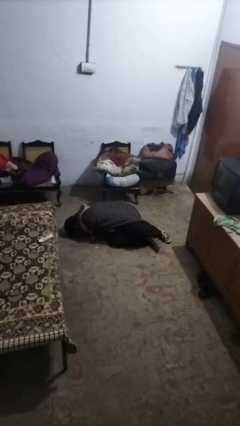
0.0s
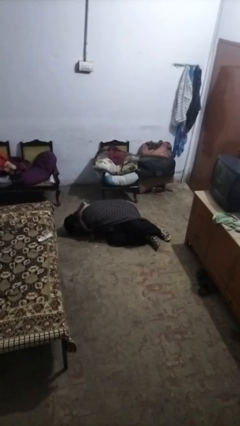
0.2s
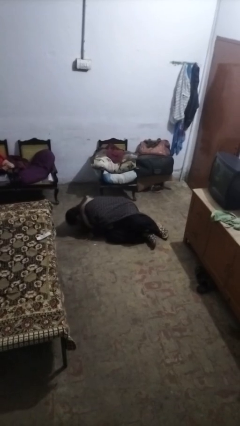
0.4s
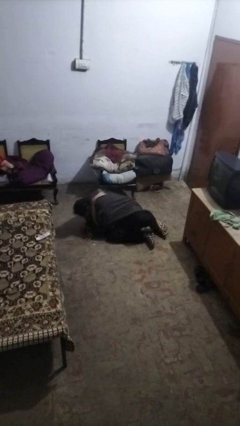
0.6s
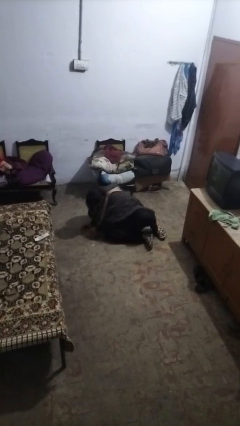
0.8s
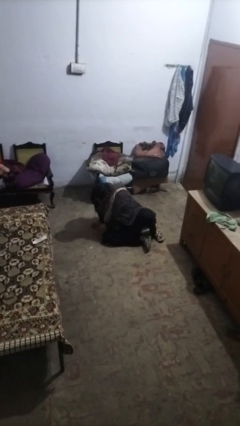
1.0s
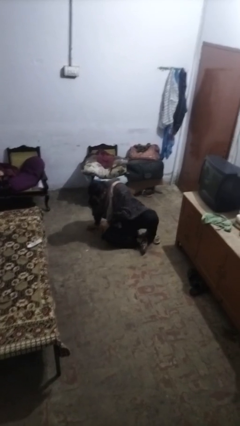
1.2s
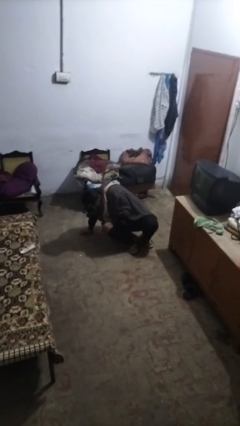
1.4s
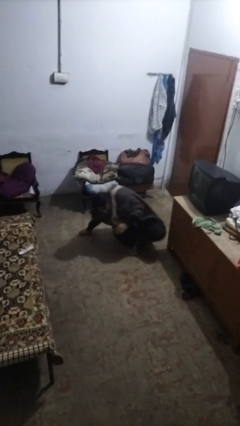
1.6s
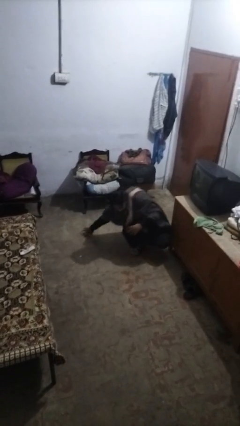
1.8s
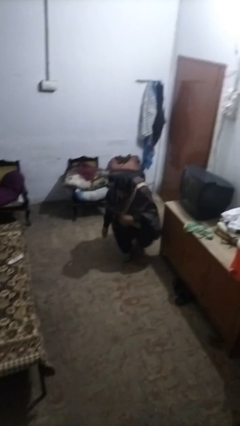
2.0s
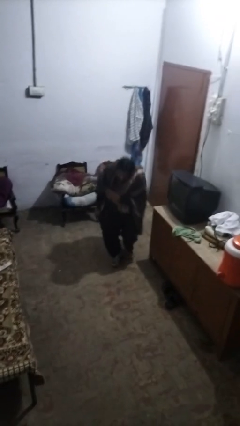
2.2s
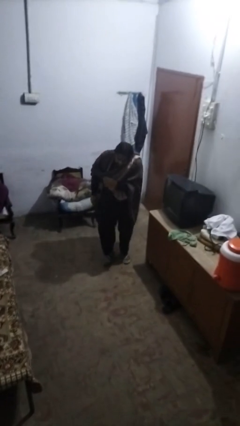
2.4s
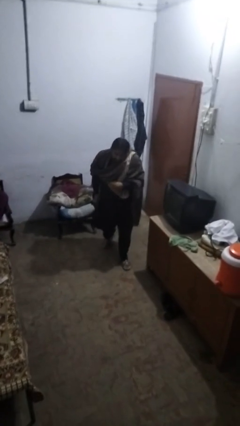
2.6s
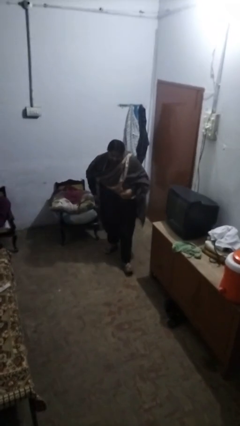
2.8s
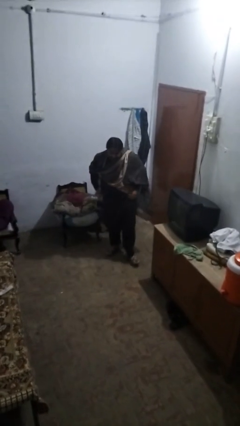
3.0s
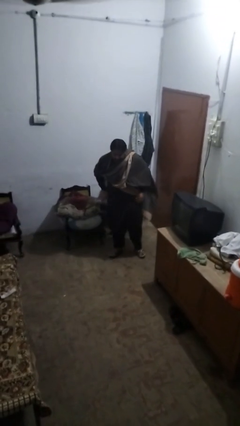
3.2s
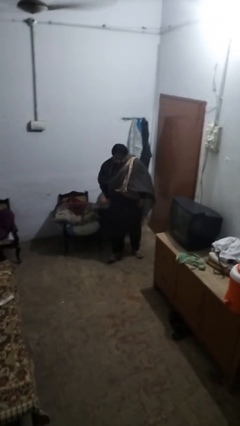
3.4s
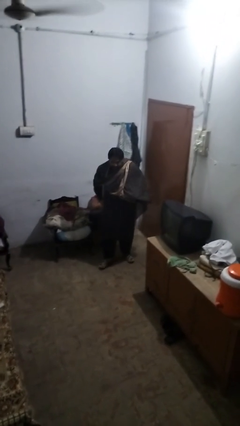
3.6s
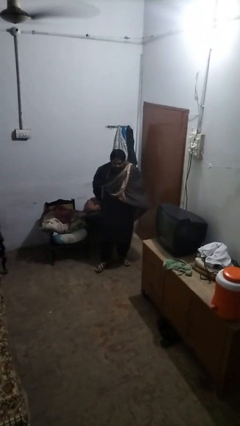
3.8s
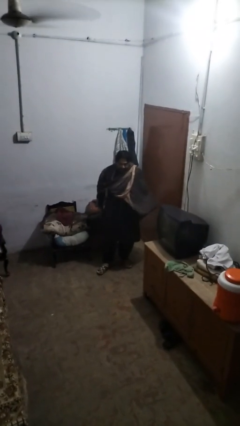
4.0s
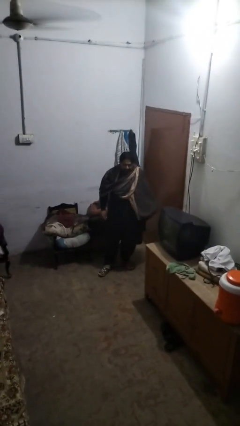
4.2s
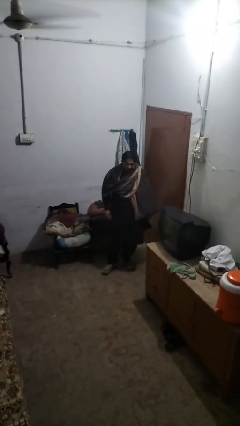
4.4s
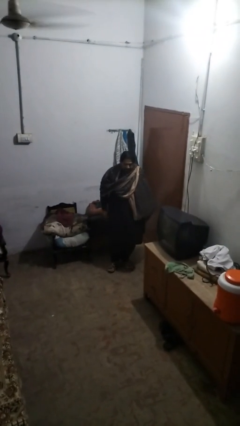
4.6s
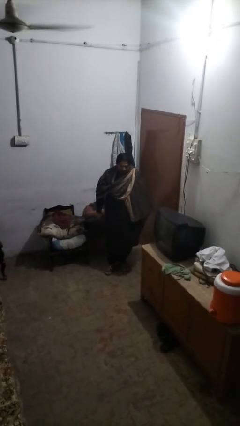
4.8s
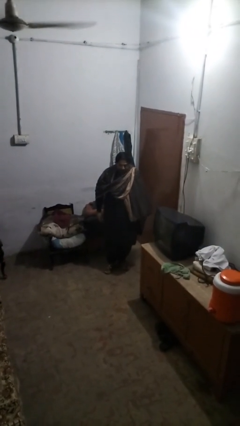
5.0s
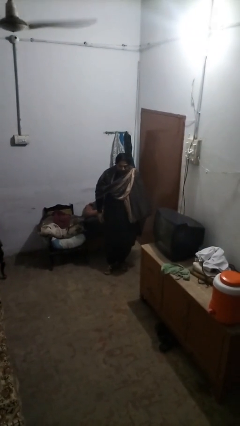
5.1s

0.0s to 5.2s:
person stands up from floor

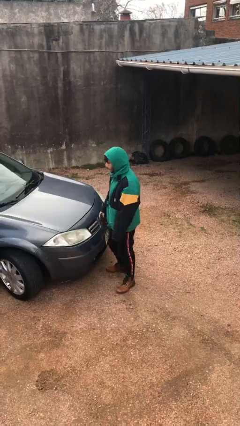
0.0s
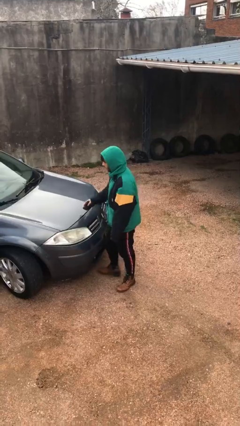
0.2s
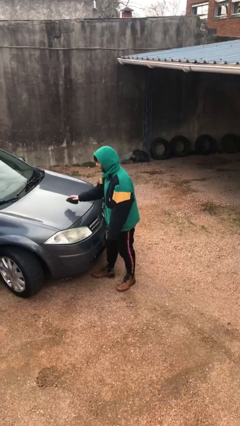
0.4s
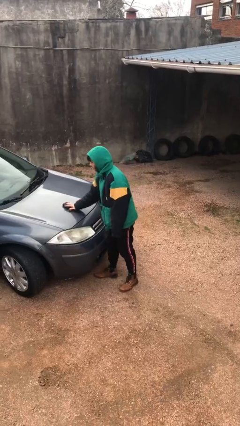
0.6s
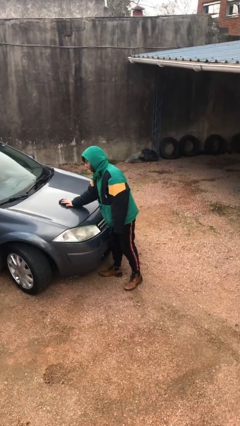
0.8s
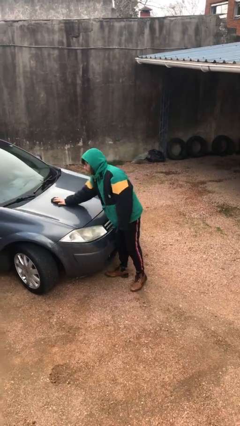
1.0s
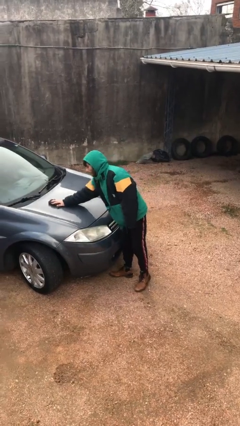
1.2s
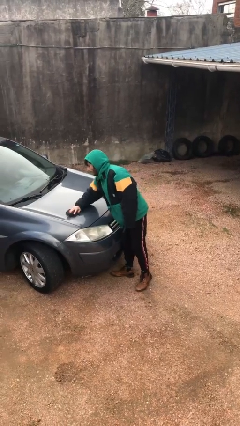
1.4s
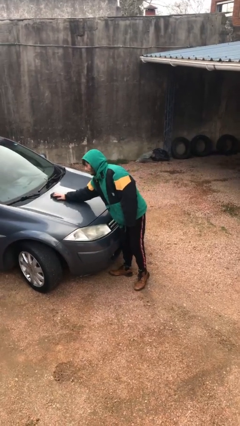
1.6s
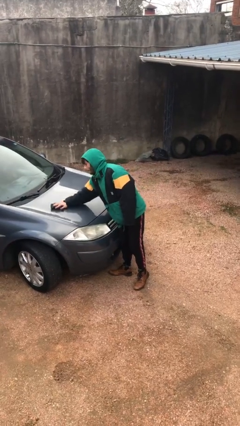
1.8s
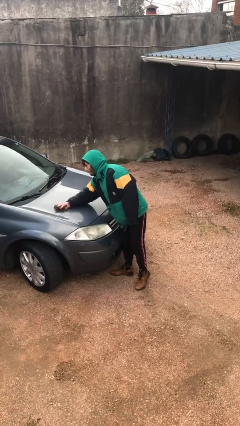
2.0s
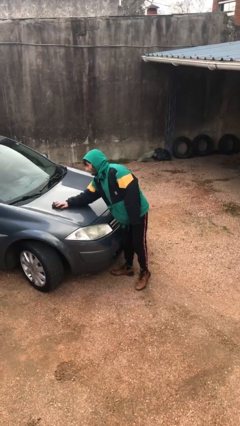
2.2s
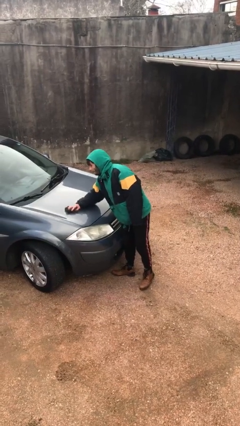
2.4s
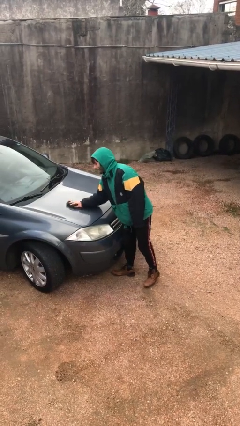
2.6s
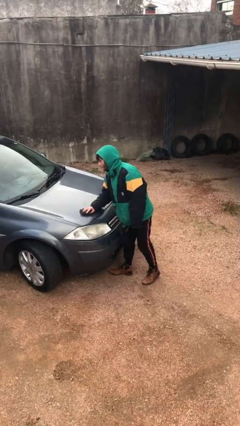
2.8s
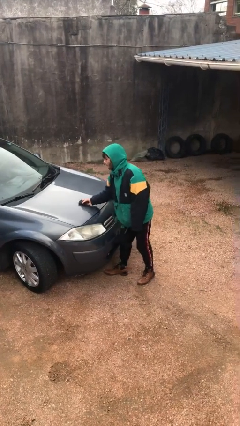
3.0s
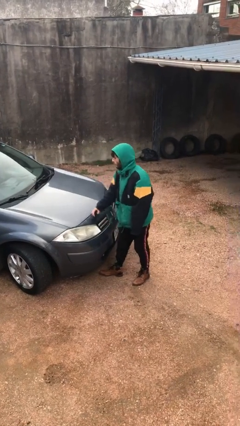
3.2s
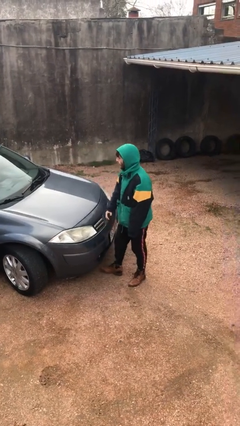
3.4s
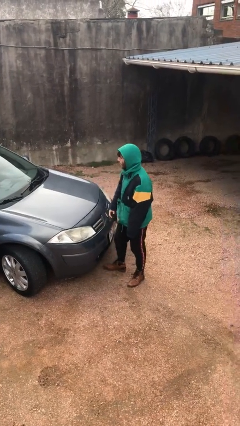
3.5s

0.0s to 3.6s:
person polishes car with rag

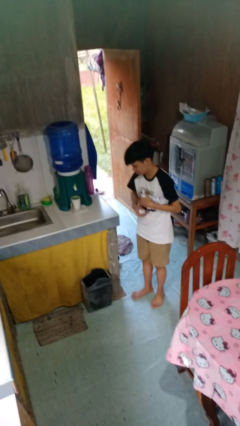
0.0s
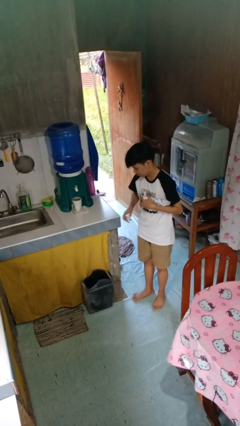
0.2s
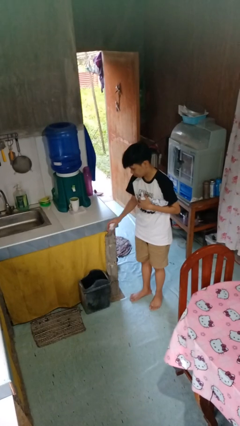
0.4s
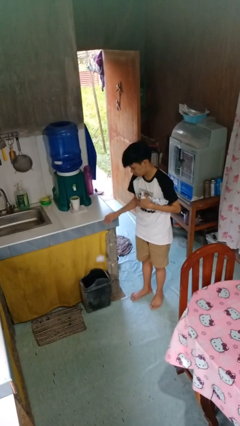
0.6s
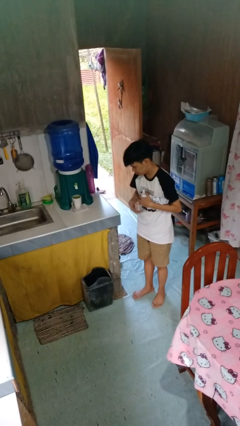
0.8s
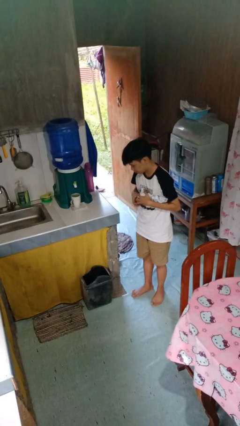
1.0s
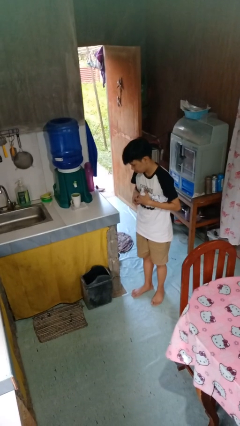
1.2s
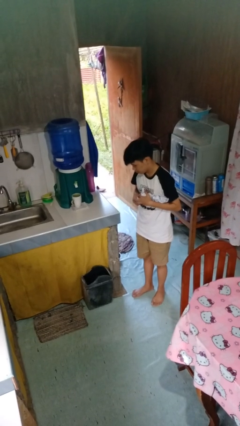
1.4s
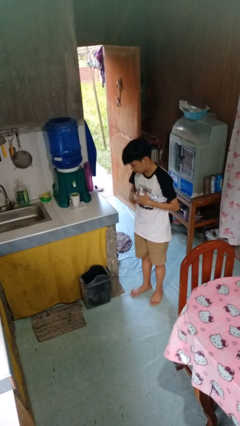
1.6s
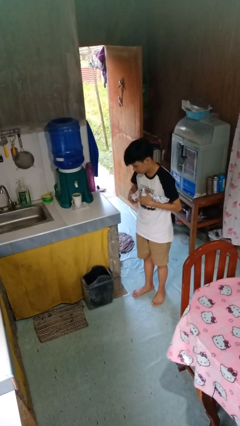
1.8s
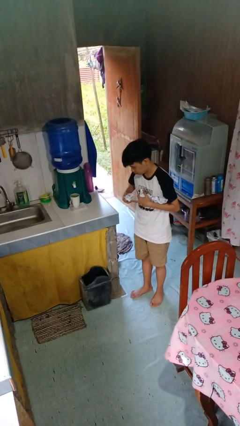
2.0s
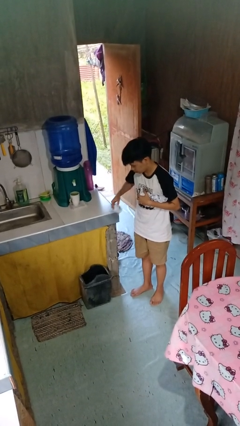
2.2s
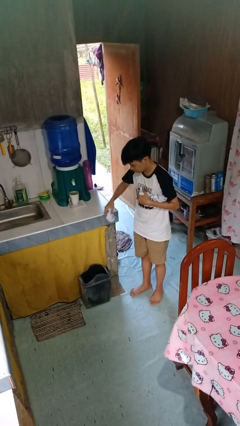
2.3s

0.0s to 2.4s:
person discards trash

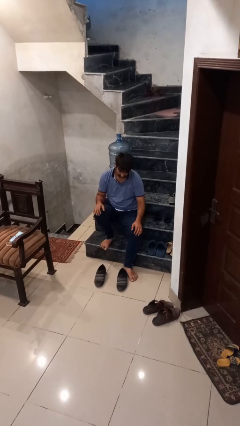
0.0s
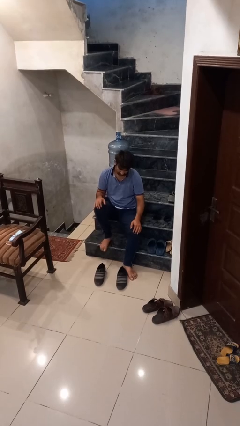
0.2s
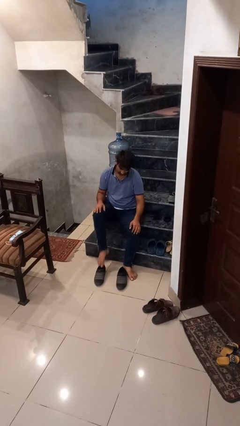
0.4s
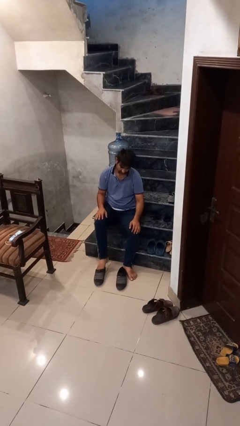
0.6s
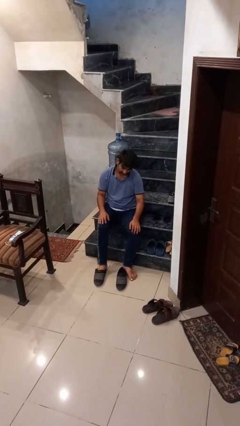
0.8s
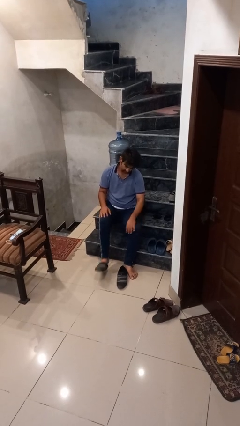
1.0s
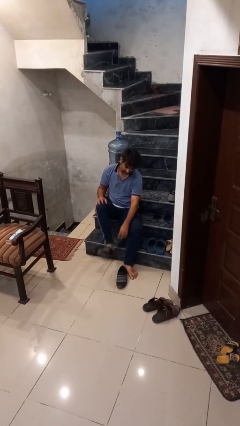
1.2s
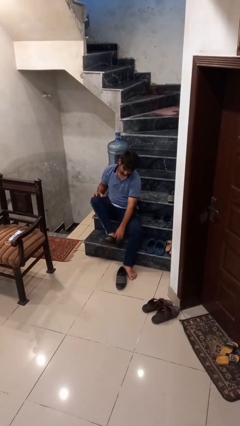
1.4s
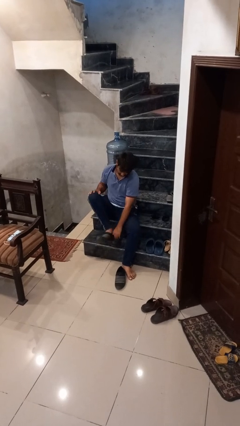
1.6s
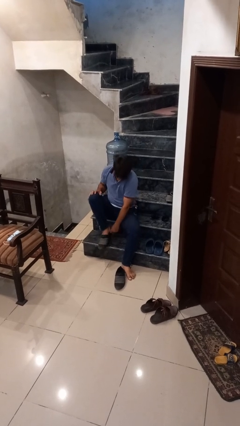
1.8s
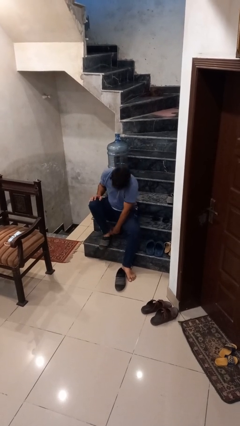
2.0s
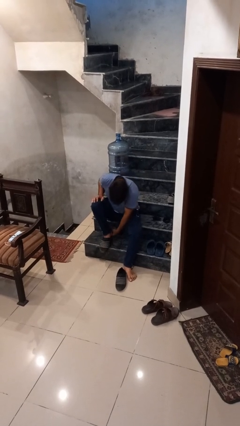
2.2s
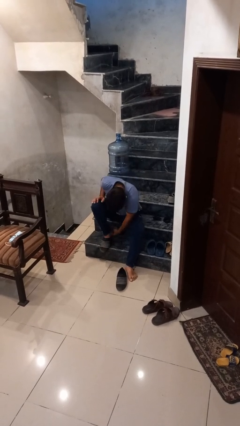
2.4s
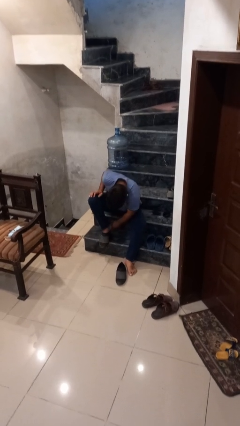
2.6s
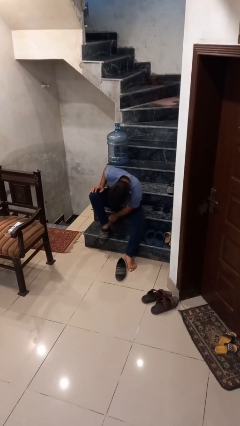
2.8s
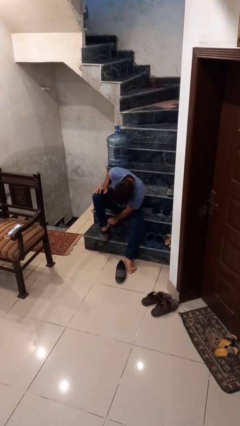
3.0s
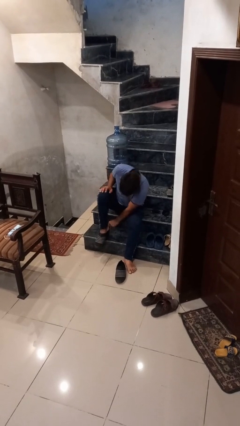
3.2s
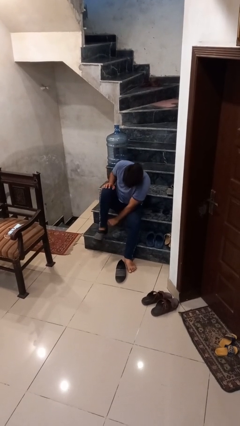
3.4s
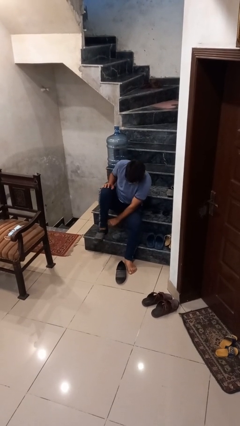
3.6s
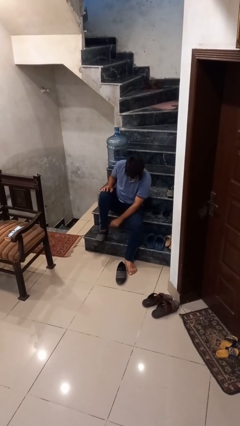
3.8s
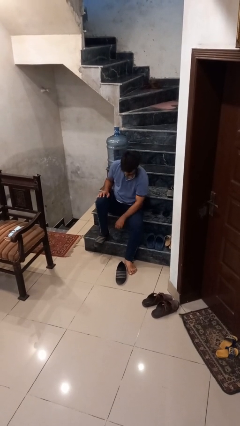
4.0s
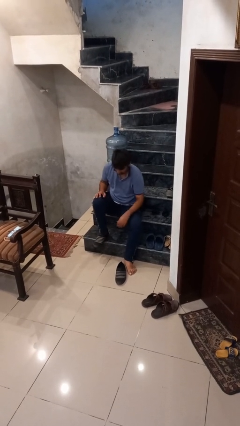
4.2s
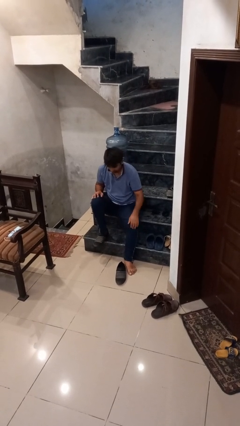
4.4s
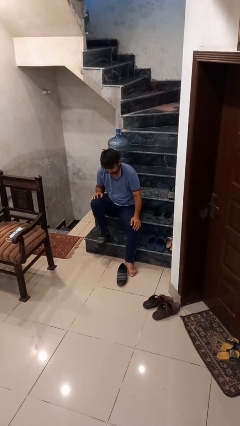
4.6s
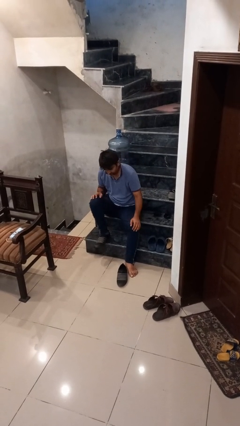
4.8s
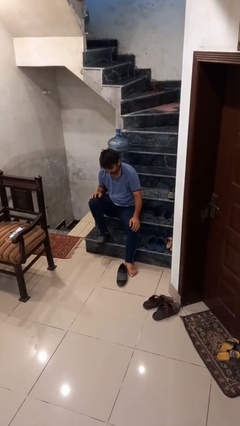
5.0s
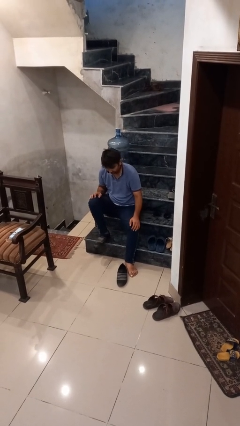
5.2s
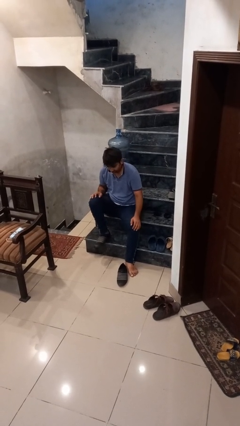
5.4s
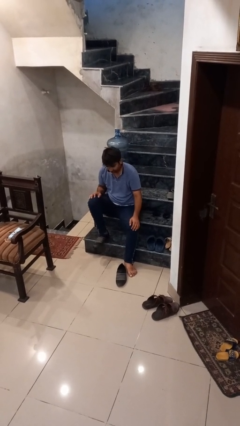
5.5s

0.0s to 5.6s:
person puts on shoes

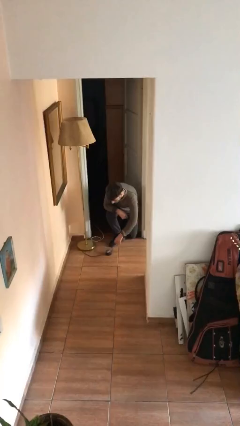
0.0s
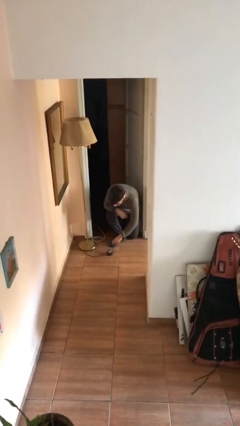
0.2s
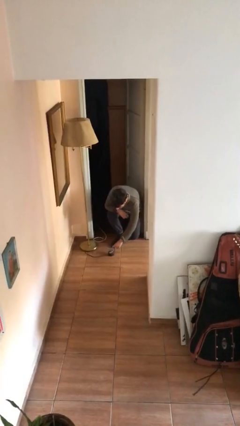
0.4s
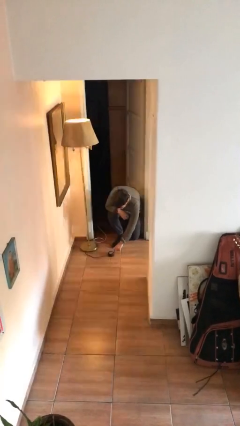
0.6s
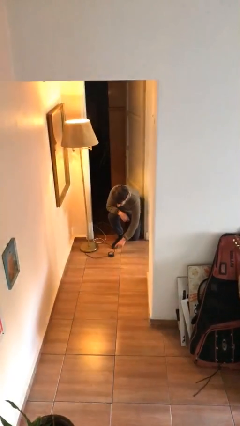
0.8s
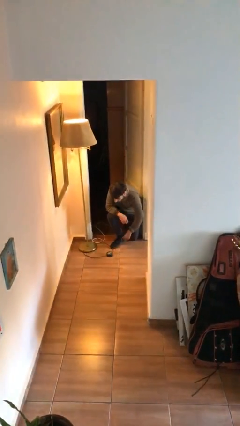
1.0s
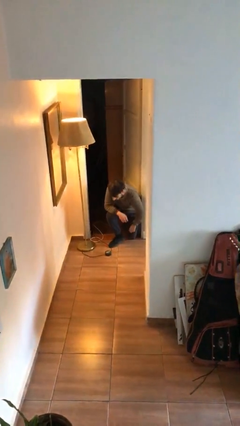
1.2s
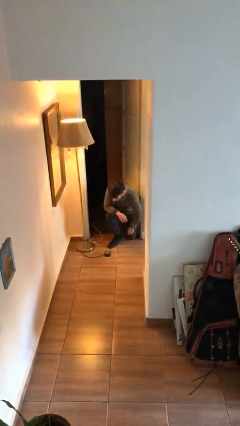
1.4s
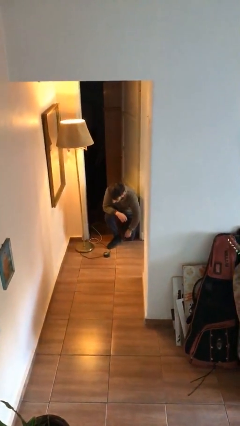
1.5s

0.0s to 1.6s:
person turns on lamp
